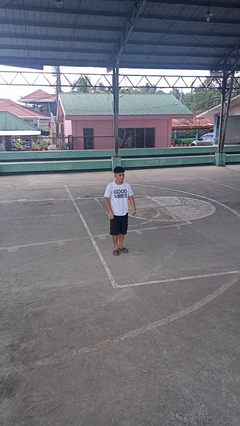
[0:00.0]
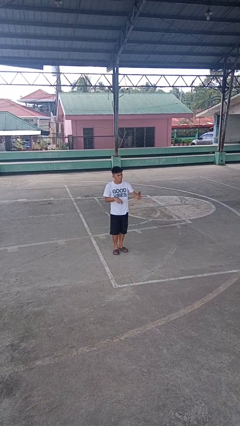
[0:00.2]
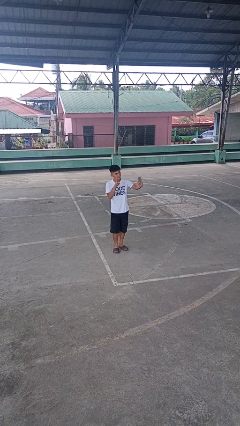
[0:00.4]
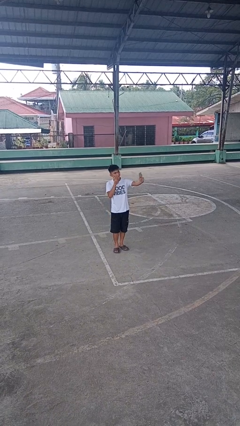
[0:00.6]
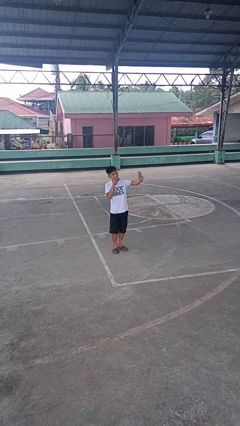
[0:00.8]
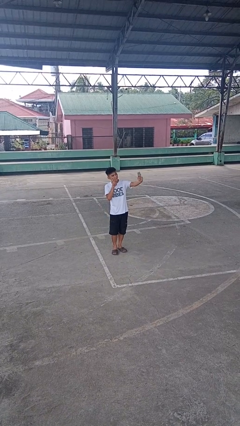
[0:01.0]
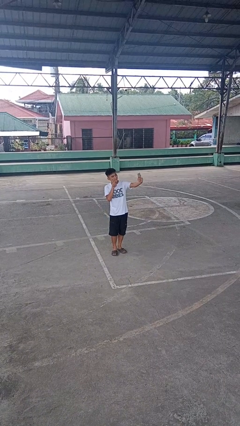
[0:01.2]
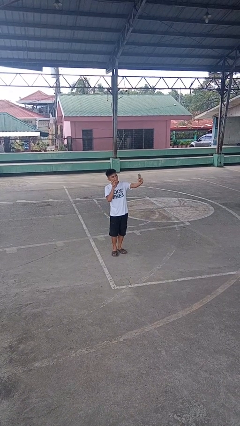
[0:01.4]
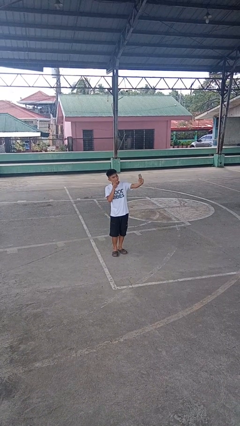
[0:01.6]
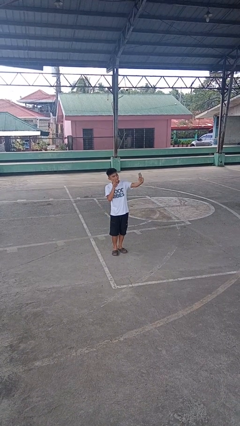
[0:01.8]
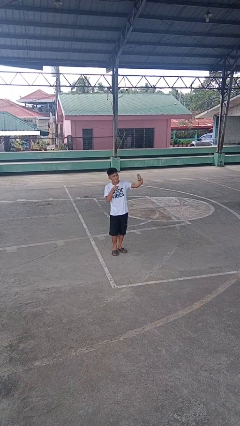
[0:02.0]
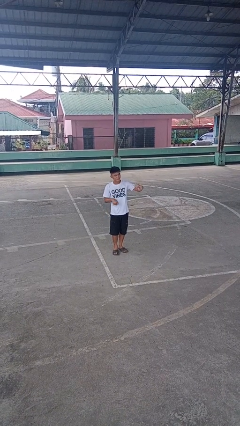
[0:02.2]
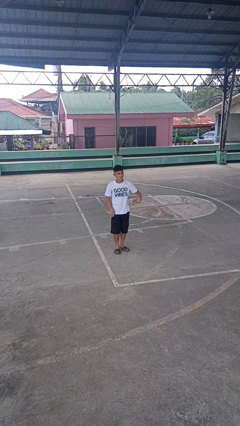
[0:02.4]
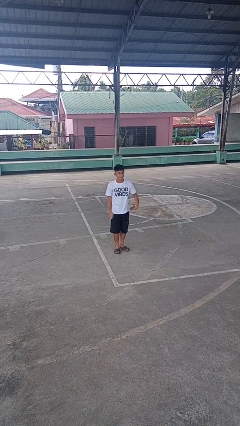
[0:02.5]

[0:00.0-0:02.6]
person takes selfie

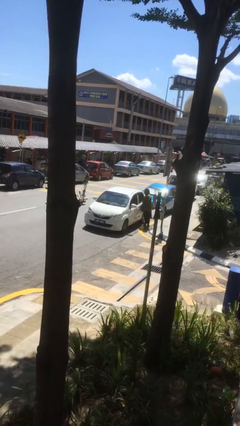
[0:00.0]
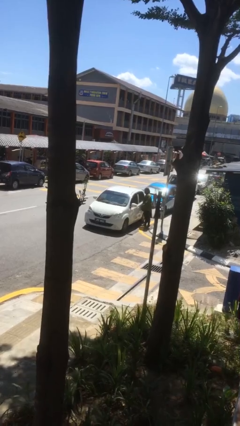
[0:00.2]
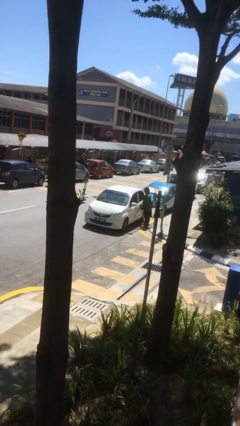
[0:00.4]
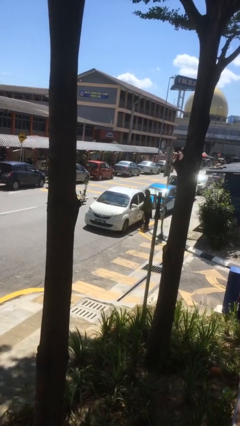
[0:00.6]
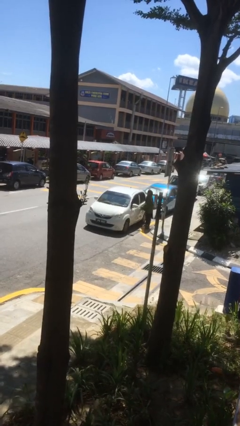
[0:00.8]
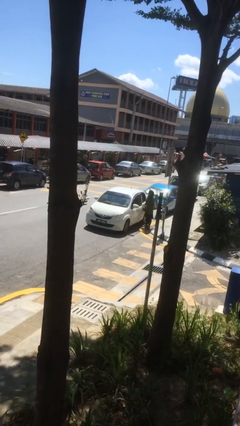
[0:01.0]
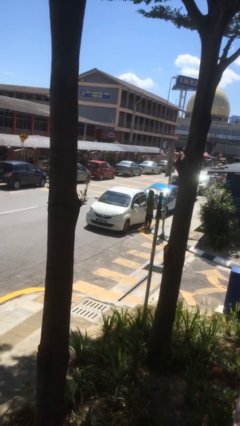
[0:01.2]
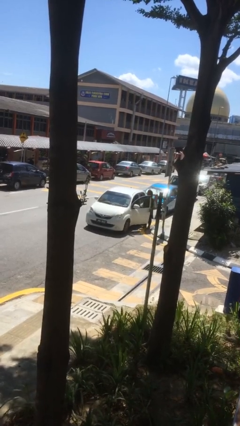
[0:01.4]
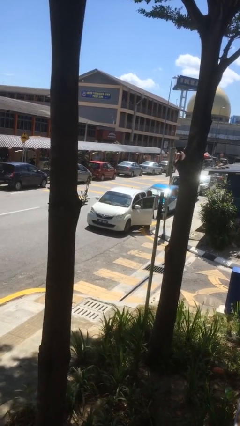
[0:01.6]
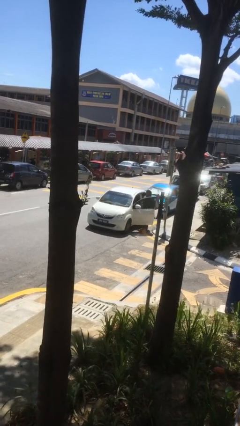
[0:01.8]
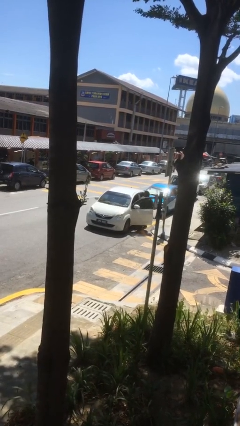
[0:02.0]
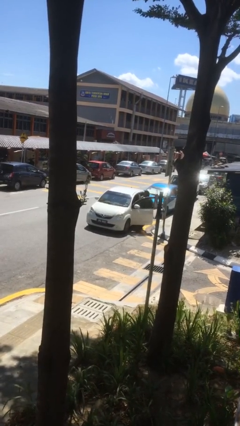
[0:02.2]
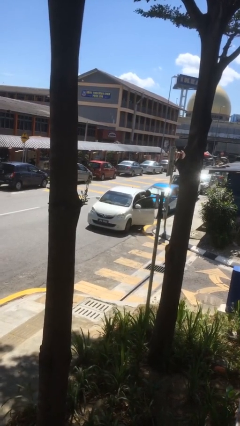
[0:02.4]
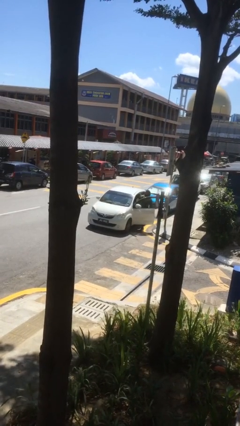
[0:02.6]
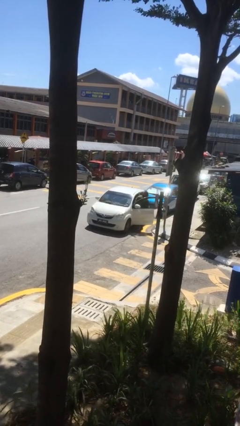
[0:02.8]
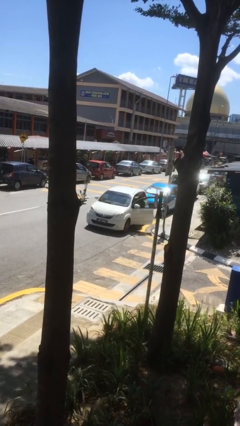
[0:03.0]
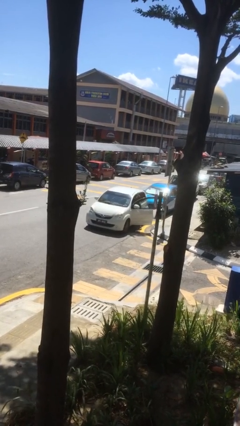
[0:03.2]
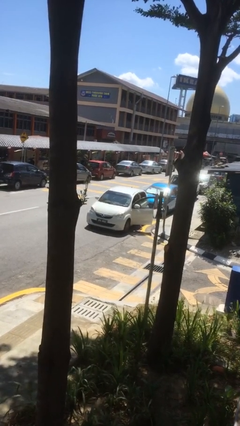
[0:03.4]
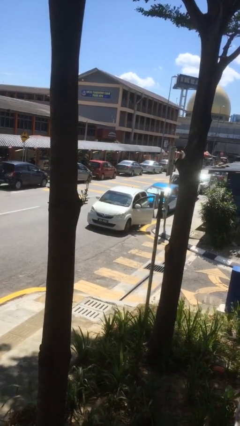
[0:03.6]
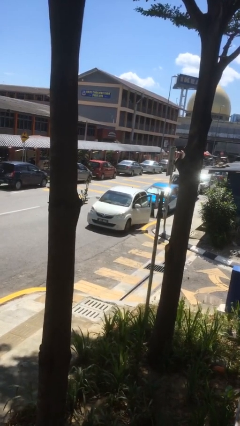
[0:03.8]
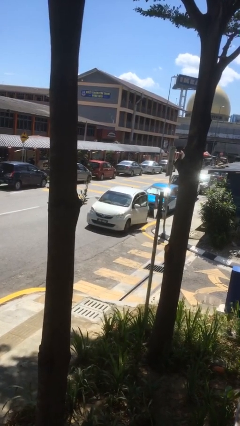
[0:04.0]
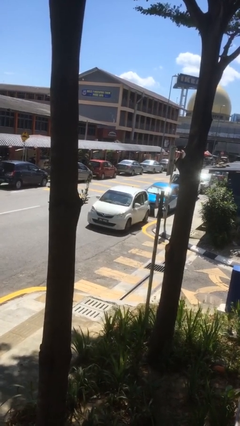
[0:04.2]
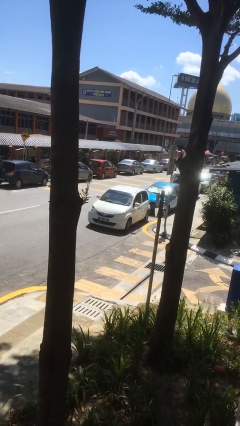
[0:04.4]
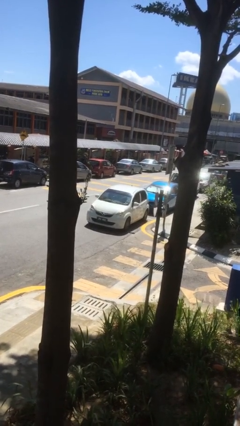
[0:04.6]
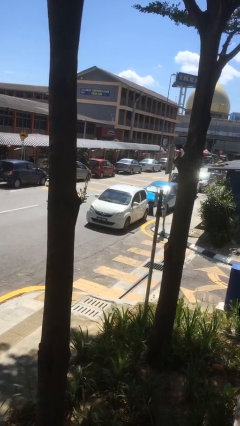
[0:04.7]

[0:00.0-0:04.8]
car picks up person

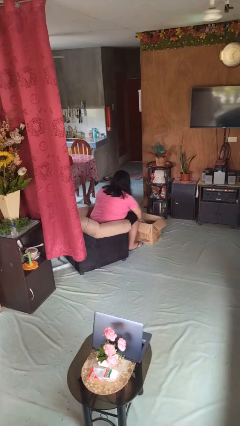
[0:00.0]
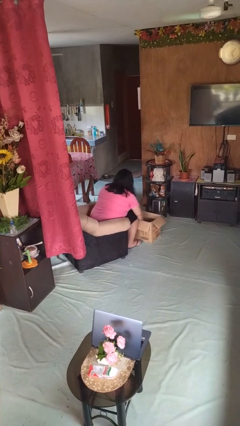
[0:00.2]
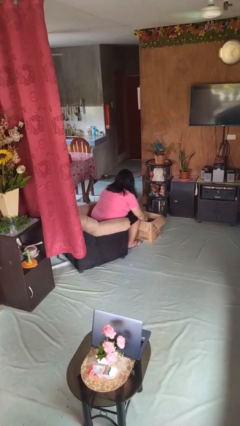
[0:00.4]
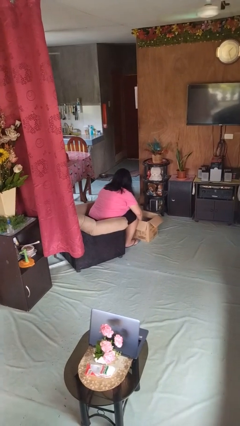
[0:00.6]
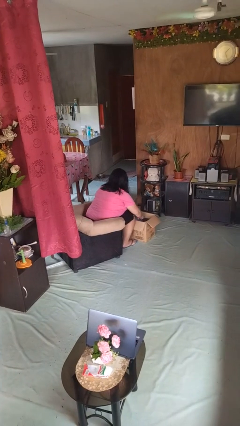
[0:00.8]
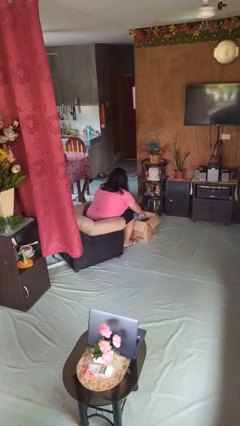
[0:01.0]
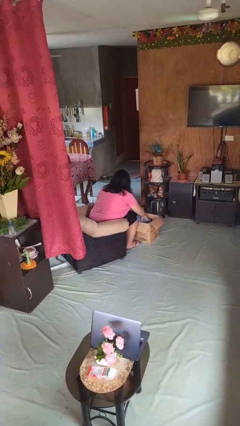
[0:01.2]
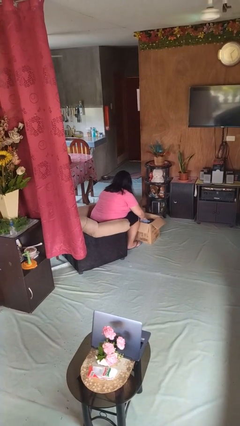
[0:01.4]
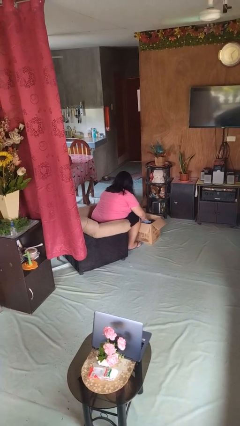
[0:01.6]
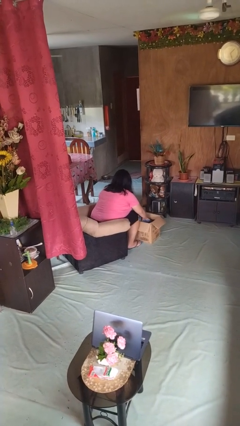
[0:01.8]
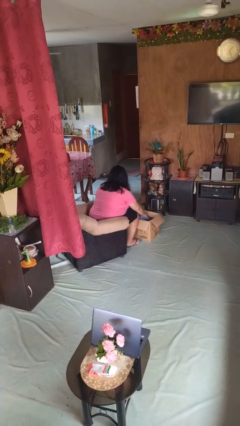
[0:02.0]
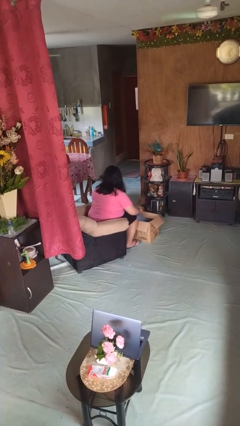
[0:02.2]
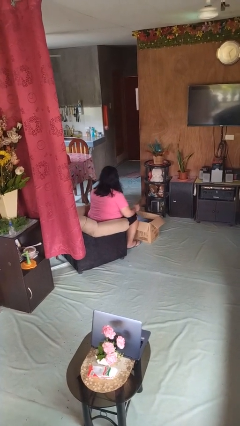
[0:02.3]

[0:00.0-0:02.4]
person searches in box

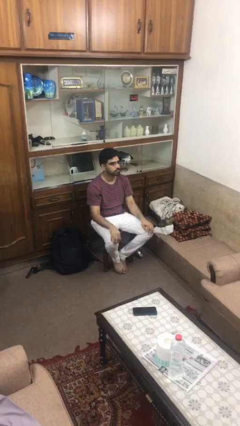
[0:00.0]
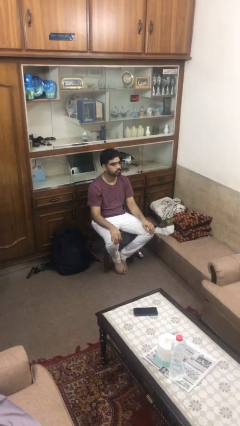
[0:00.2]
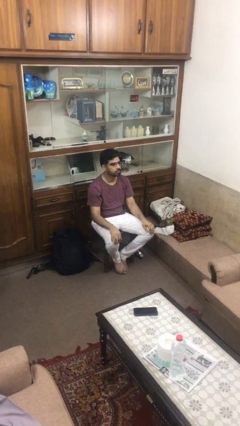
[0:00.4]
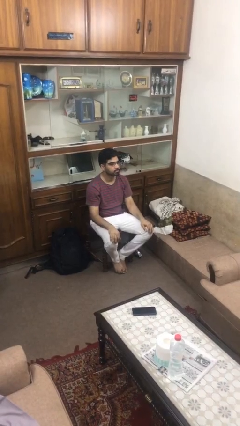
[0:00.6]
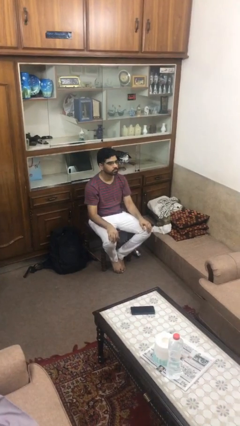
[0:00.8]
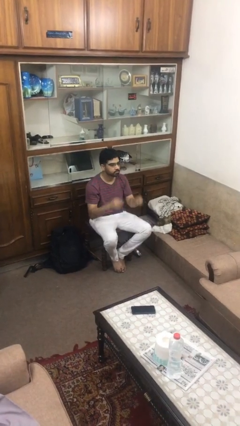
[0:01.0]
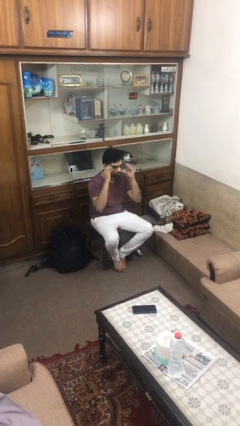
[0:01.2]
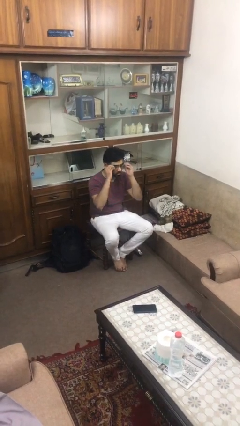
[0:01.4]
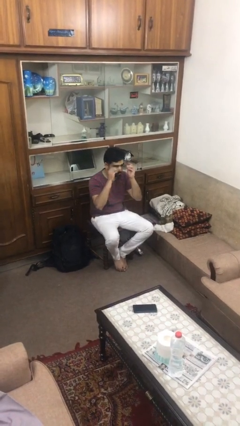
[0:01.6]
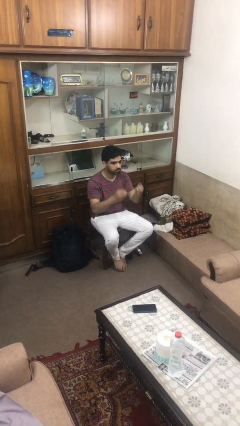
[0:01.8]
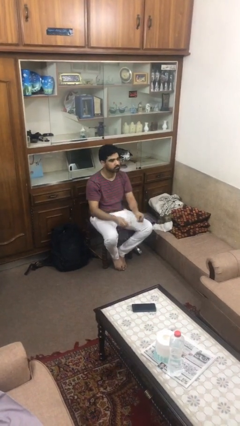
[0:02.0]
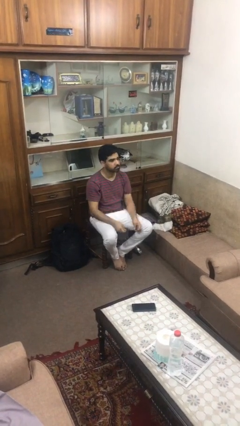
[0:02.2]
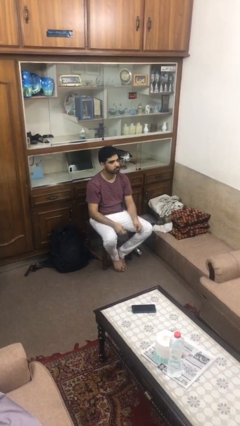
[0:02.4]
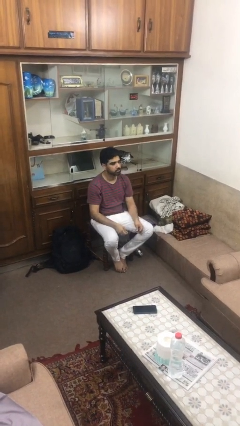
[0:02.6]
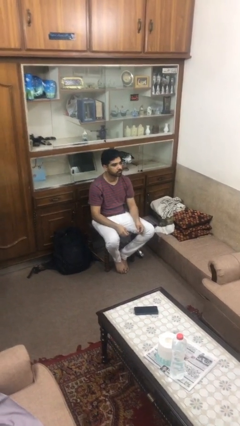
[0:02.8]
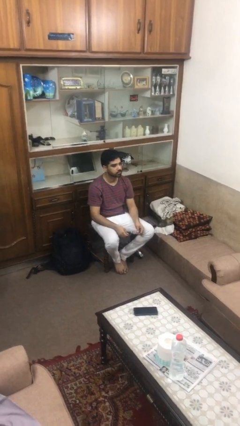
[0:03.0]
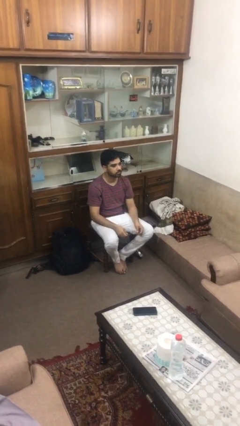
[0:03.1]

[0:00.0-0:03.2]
person takes off glasses

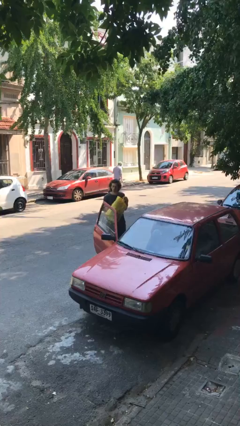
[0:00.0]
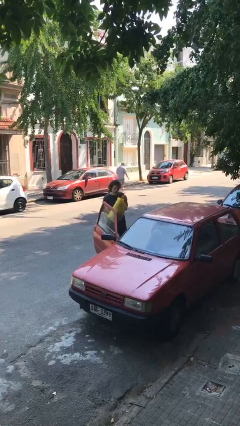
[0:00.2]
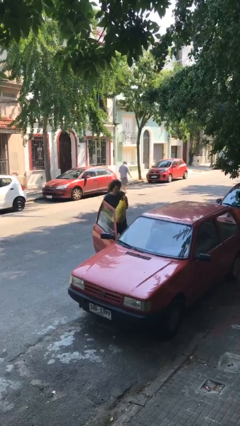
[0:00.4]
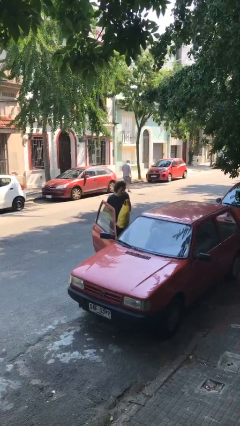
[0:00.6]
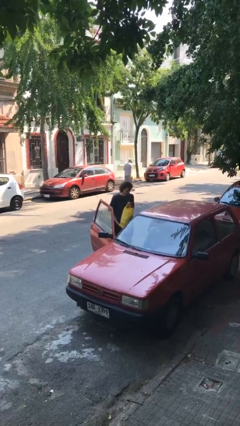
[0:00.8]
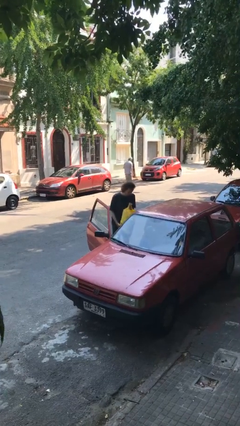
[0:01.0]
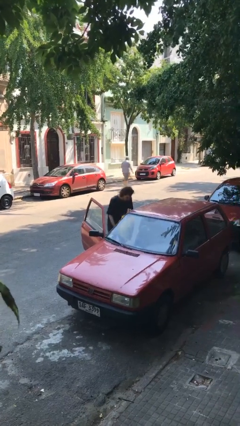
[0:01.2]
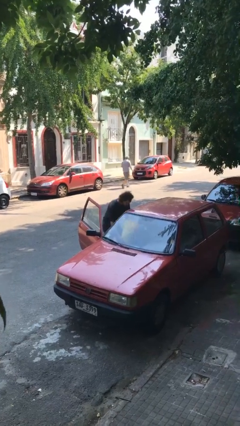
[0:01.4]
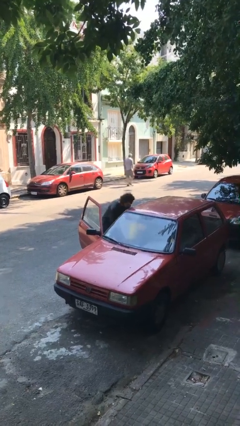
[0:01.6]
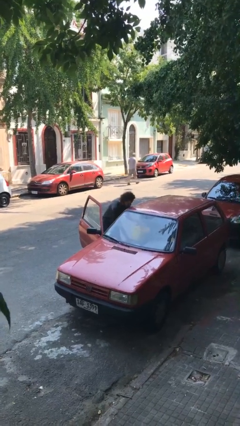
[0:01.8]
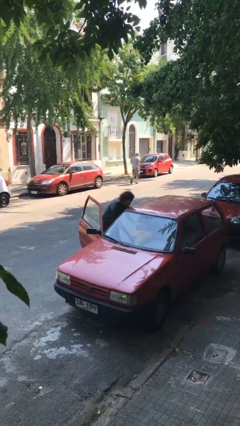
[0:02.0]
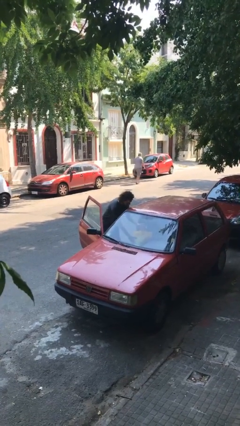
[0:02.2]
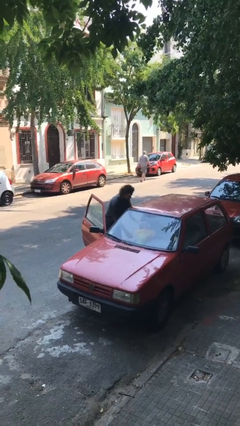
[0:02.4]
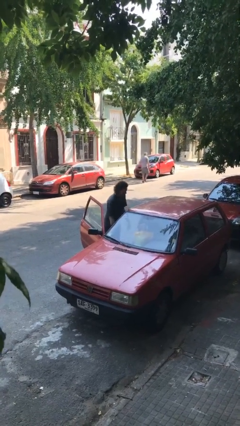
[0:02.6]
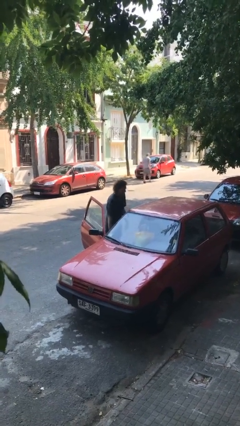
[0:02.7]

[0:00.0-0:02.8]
person loads car

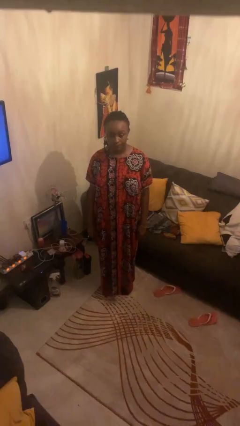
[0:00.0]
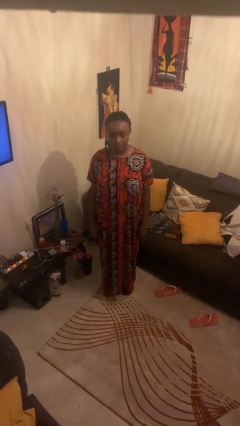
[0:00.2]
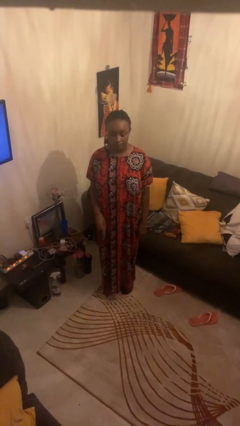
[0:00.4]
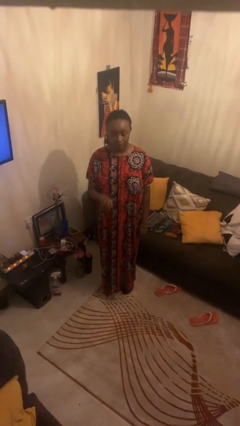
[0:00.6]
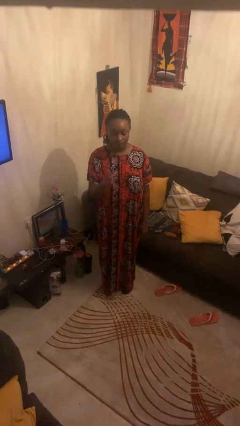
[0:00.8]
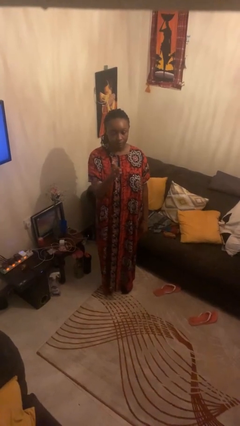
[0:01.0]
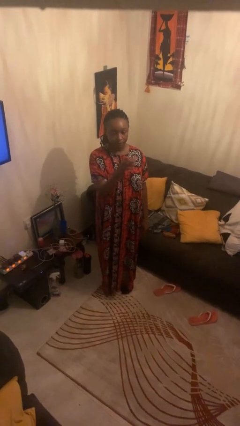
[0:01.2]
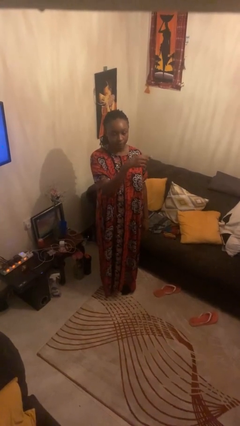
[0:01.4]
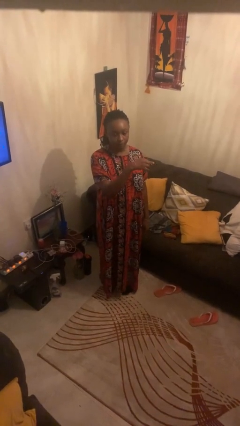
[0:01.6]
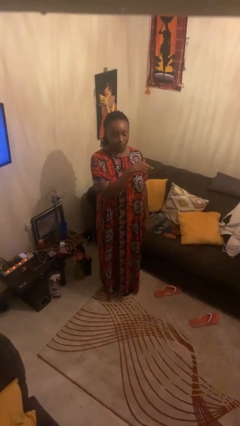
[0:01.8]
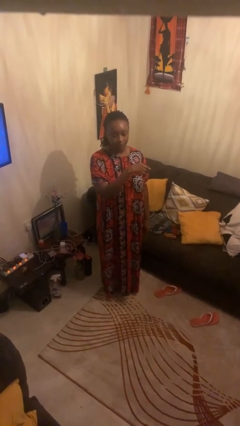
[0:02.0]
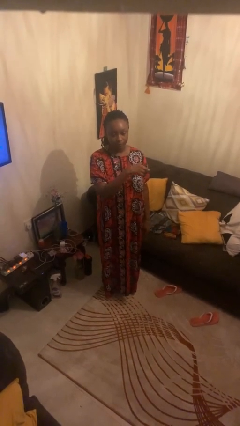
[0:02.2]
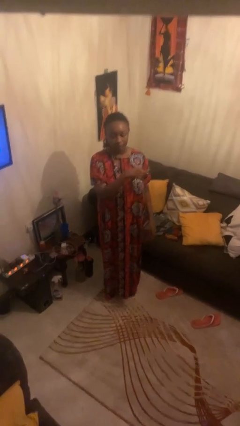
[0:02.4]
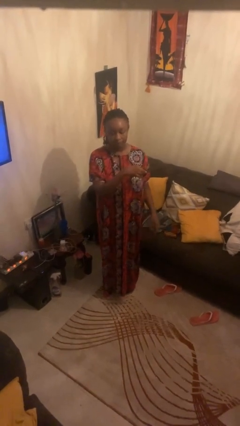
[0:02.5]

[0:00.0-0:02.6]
person gestures swipe left
